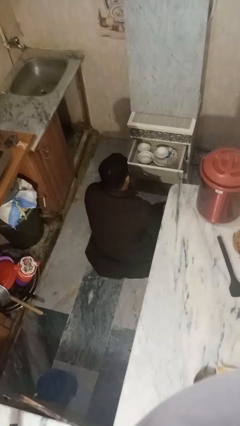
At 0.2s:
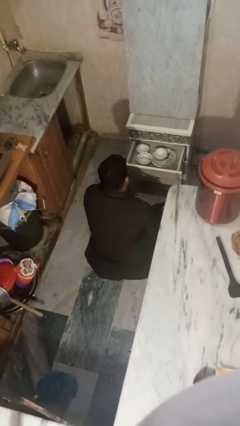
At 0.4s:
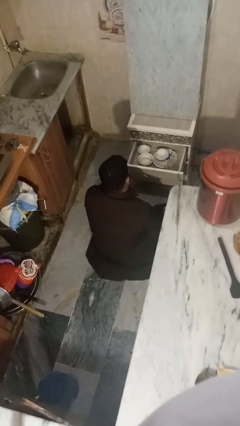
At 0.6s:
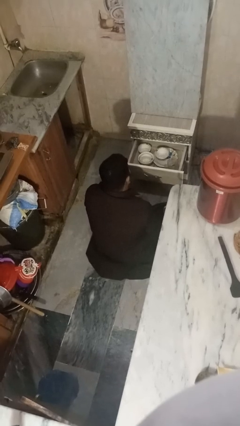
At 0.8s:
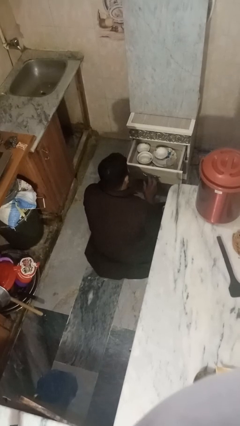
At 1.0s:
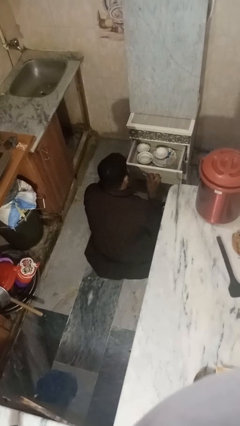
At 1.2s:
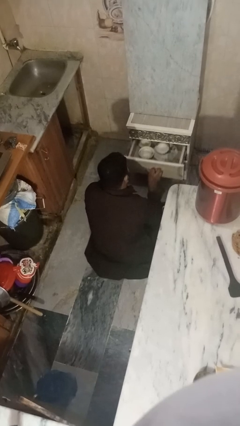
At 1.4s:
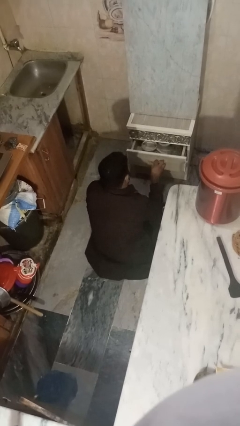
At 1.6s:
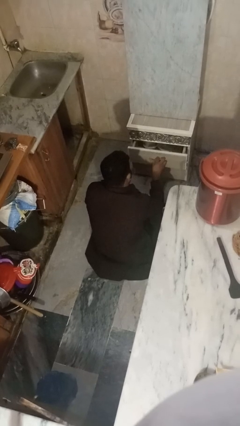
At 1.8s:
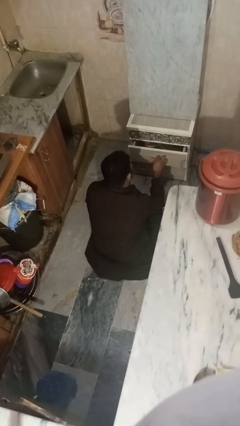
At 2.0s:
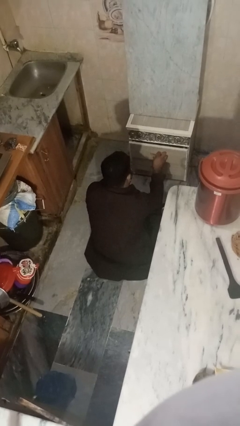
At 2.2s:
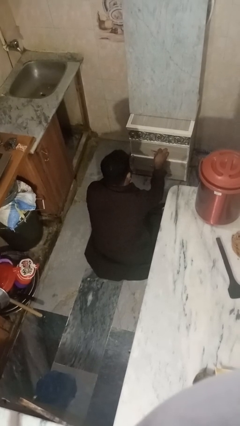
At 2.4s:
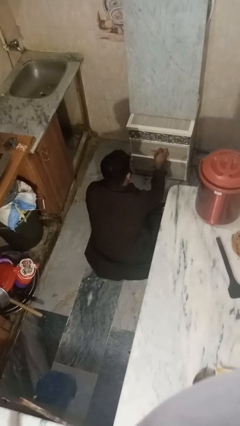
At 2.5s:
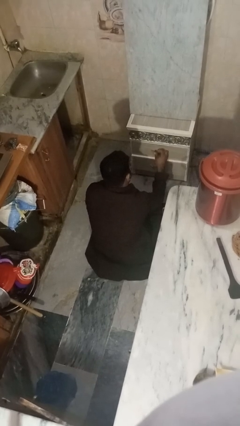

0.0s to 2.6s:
person closes kitchen drawer

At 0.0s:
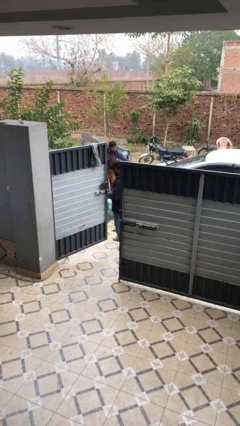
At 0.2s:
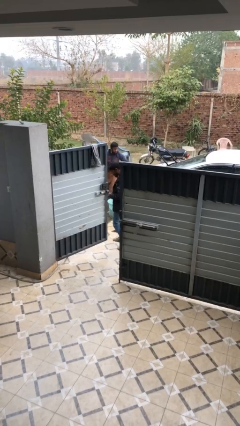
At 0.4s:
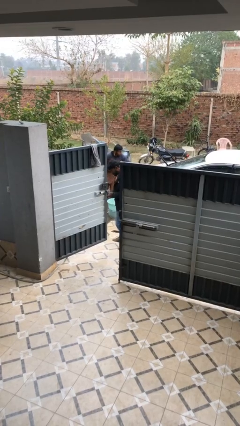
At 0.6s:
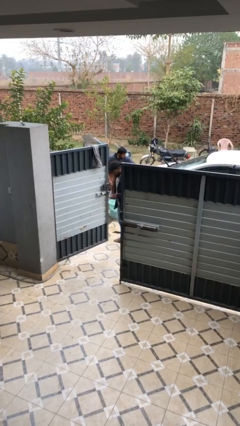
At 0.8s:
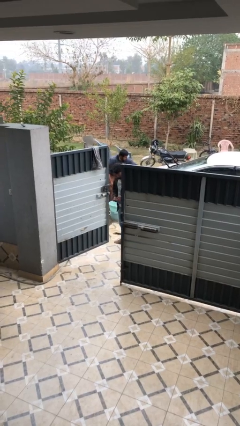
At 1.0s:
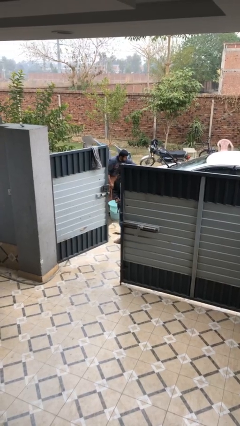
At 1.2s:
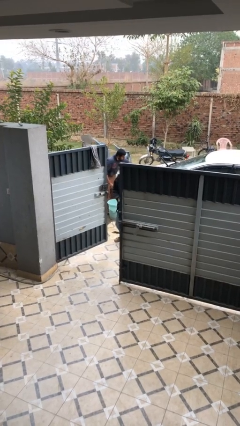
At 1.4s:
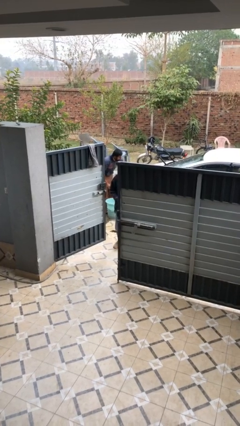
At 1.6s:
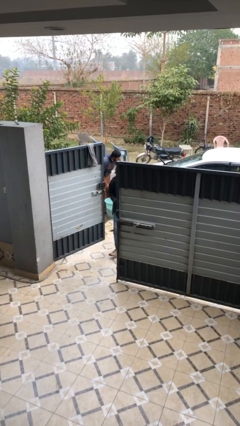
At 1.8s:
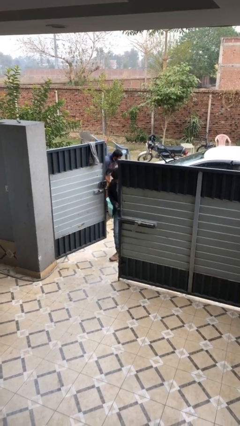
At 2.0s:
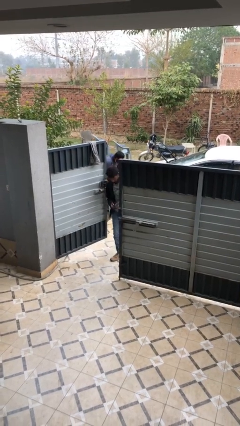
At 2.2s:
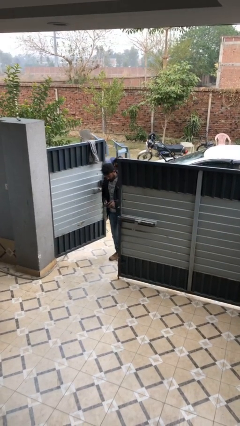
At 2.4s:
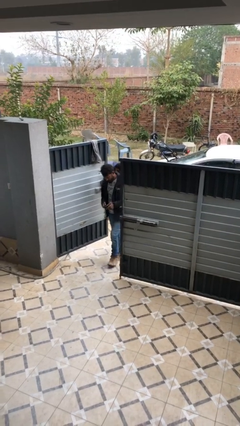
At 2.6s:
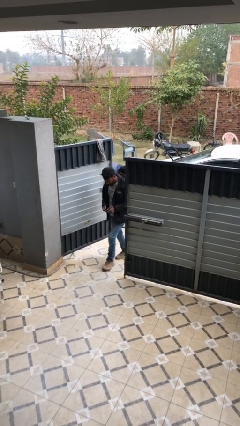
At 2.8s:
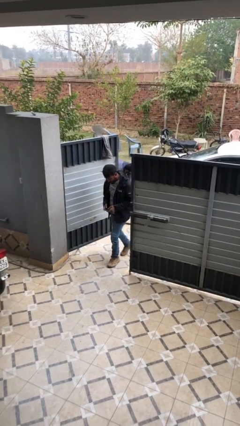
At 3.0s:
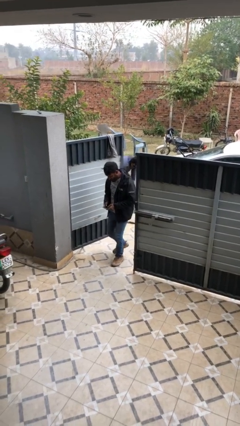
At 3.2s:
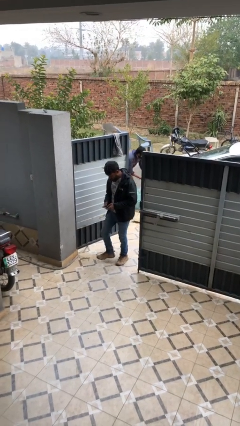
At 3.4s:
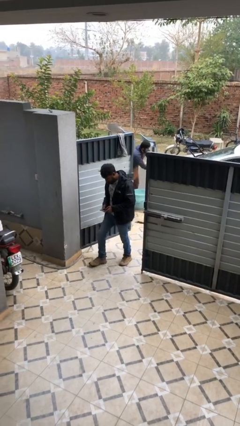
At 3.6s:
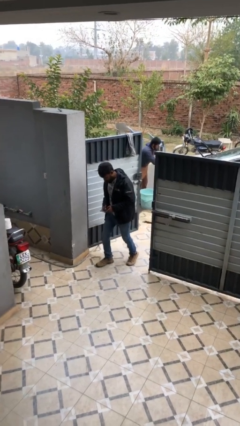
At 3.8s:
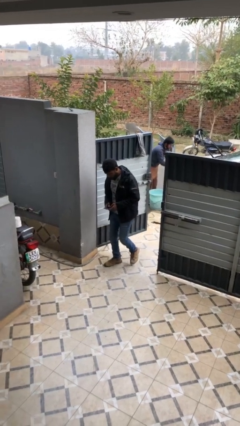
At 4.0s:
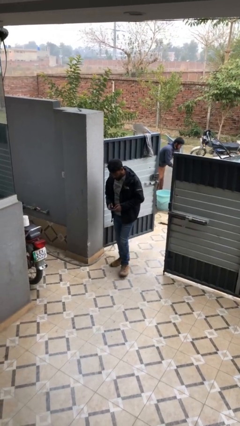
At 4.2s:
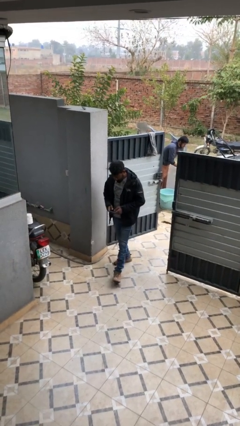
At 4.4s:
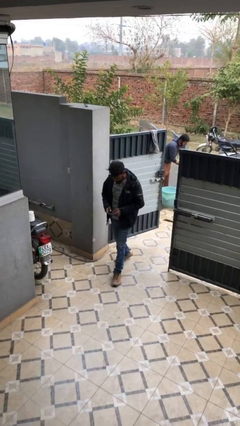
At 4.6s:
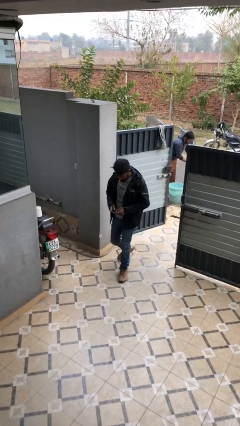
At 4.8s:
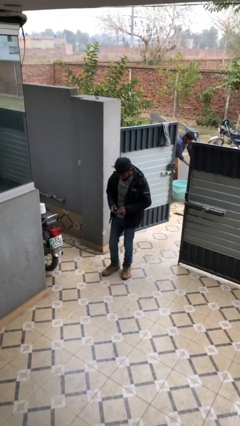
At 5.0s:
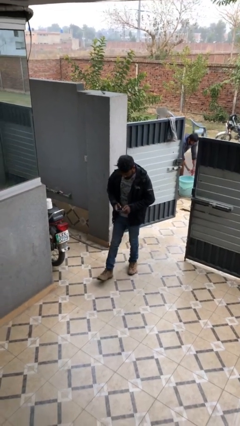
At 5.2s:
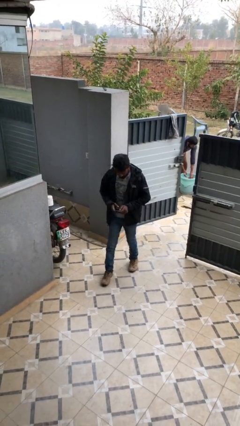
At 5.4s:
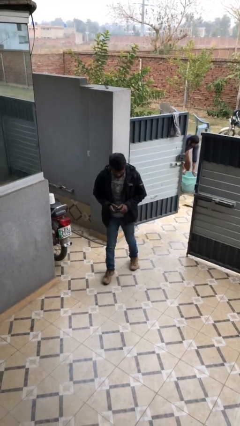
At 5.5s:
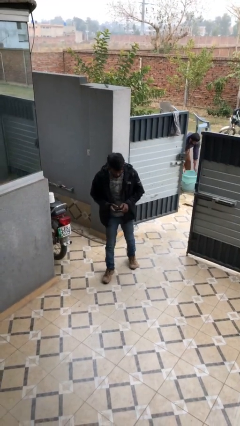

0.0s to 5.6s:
person enters scene through structure

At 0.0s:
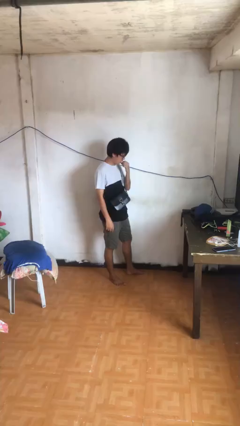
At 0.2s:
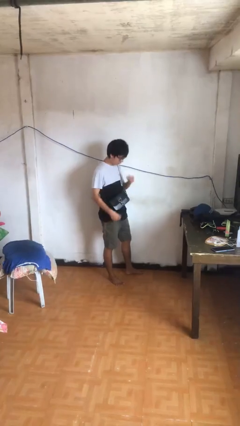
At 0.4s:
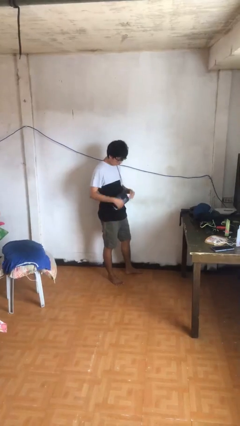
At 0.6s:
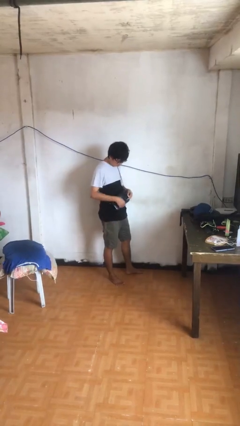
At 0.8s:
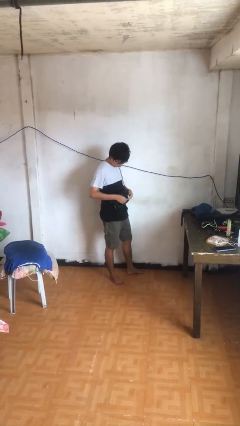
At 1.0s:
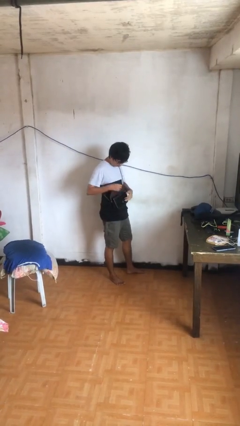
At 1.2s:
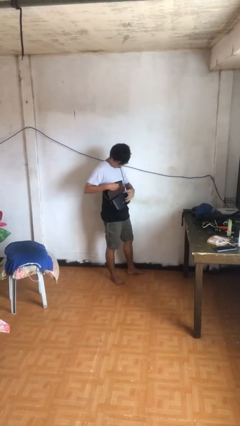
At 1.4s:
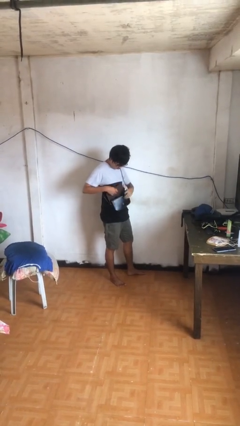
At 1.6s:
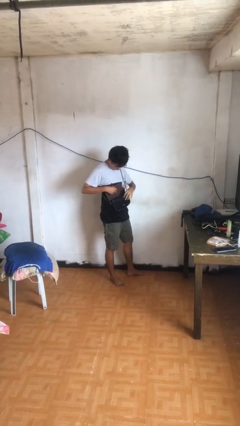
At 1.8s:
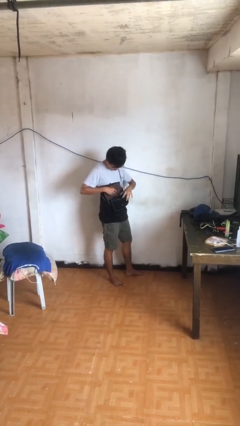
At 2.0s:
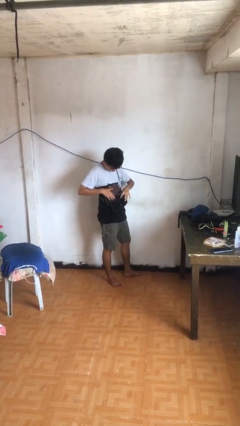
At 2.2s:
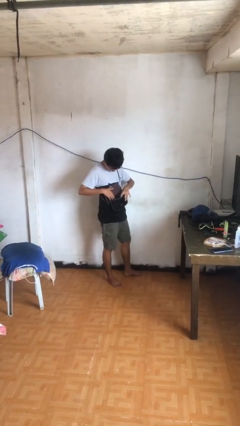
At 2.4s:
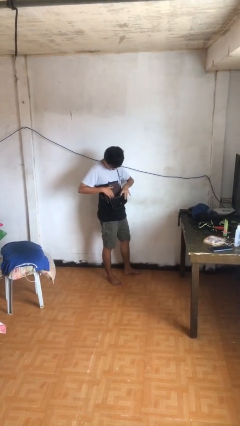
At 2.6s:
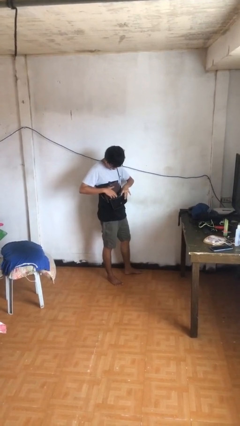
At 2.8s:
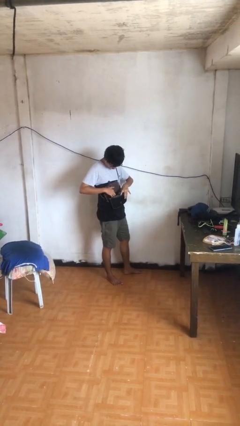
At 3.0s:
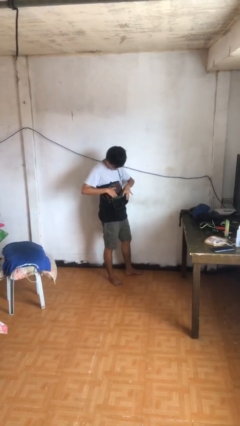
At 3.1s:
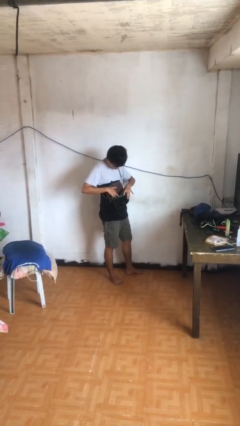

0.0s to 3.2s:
person searches in purse

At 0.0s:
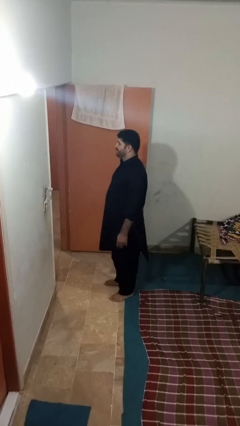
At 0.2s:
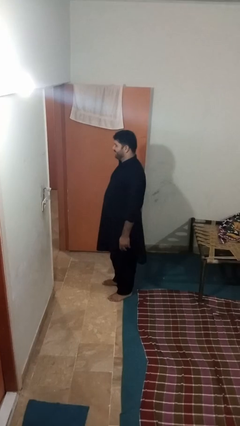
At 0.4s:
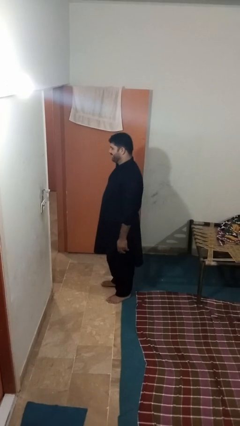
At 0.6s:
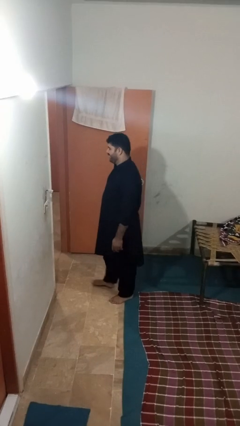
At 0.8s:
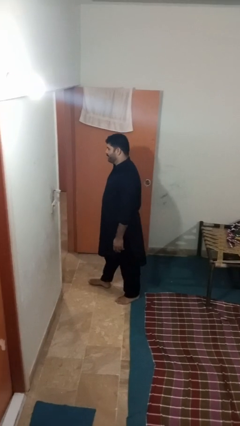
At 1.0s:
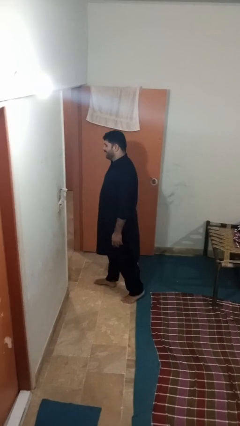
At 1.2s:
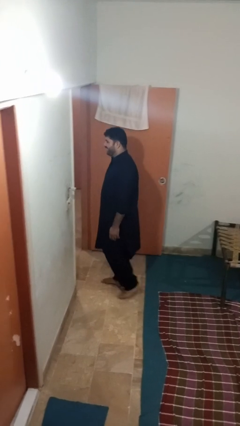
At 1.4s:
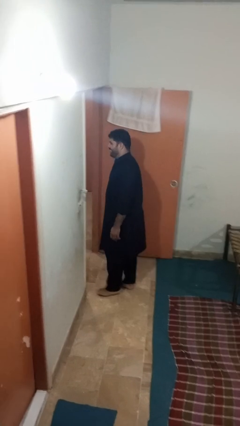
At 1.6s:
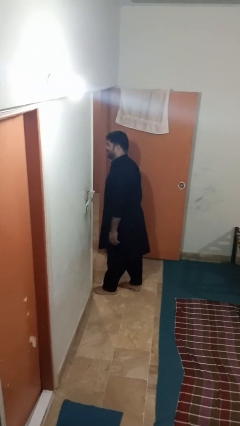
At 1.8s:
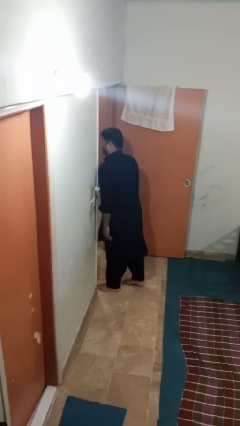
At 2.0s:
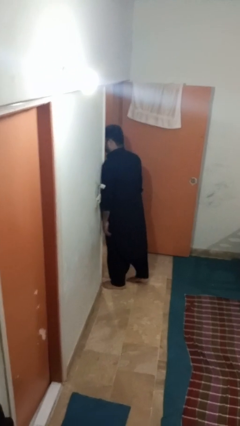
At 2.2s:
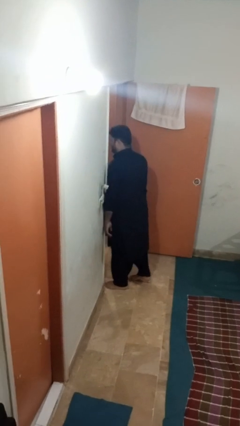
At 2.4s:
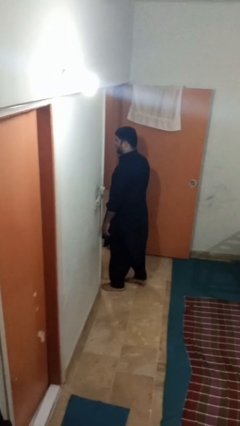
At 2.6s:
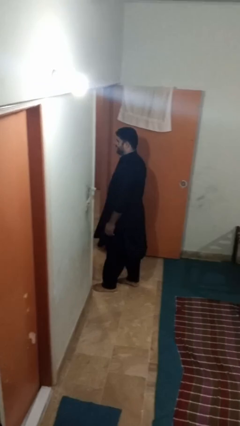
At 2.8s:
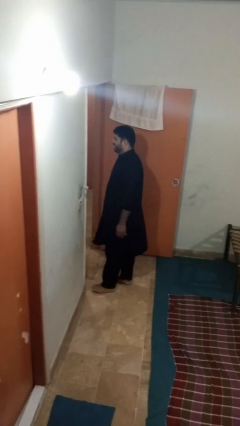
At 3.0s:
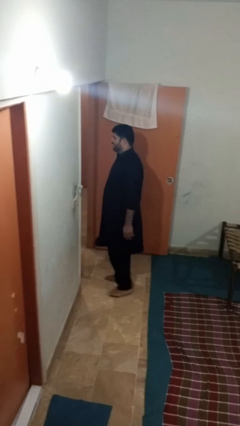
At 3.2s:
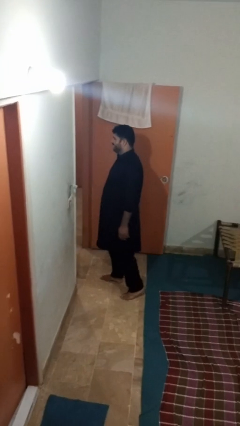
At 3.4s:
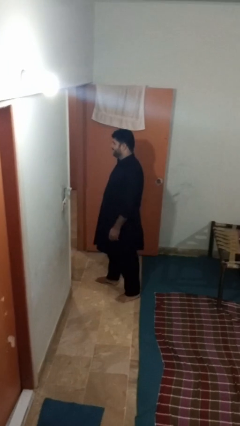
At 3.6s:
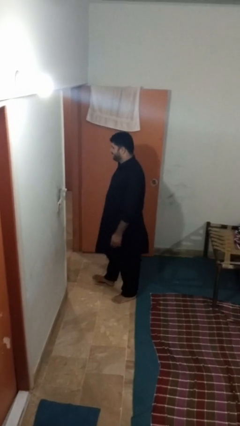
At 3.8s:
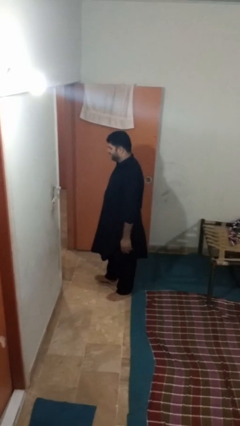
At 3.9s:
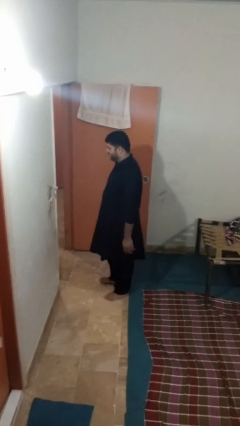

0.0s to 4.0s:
person bumps into wall

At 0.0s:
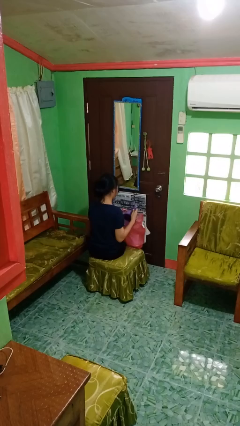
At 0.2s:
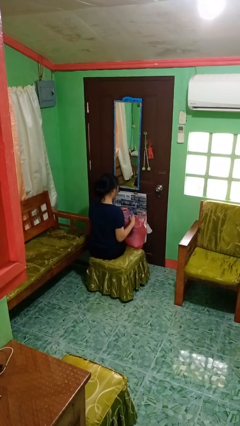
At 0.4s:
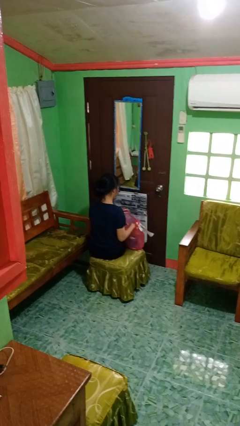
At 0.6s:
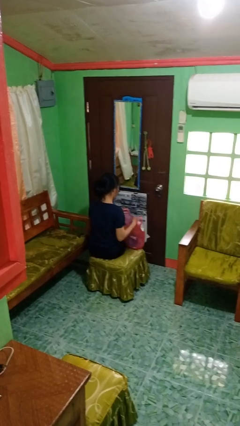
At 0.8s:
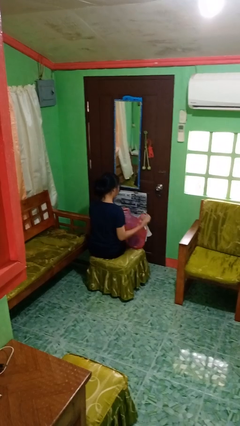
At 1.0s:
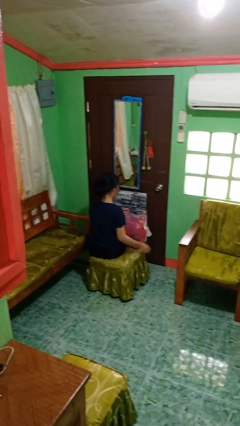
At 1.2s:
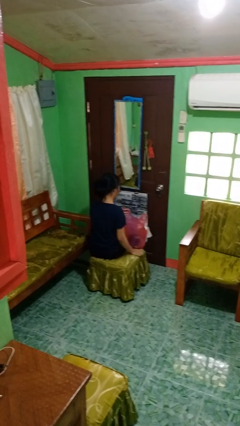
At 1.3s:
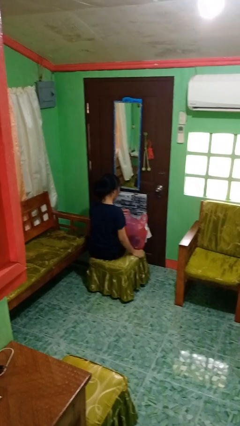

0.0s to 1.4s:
person puts object into bag

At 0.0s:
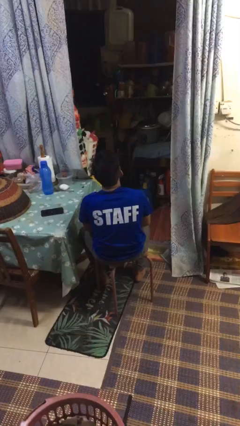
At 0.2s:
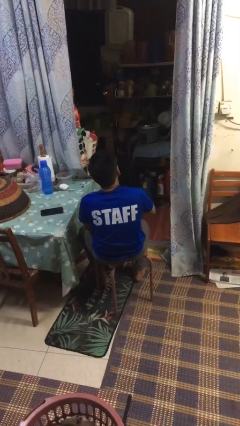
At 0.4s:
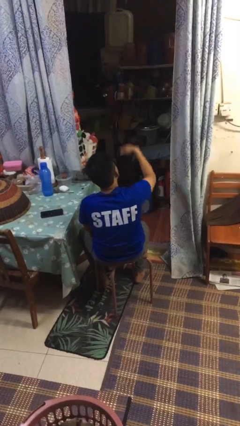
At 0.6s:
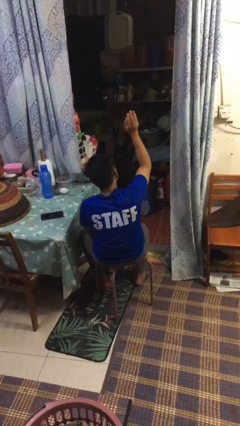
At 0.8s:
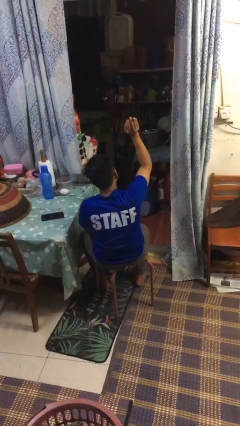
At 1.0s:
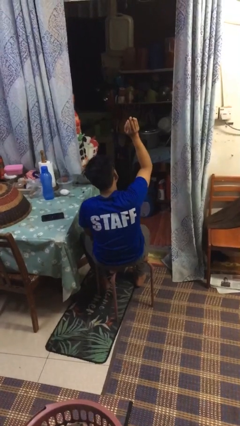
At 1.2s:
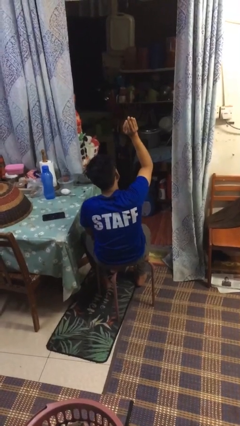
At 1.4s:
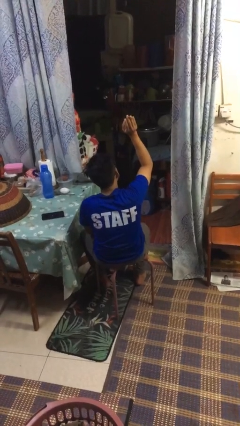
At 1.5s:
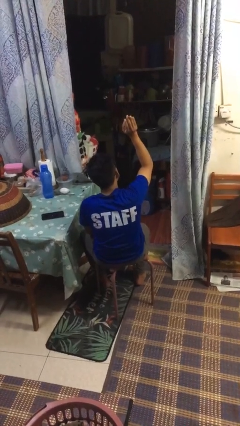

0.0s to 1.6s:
person gestures swipe up
